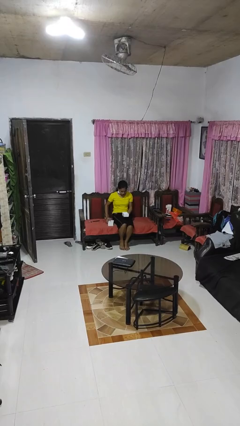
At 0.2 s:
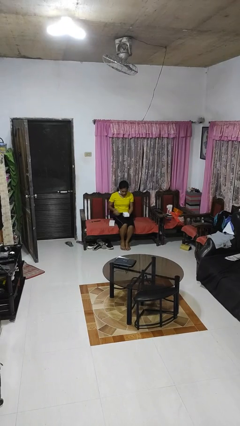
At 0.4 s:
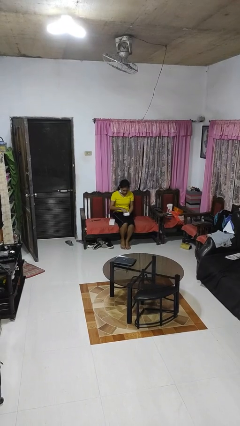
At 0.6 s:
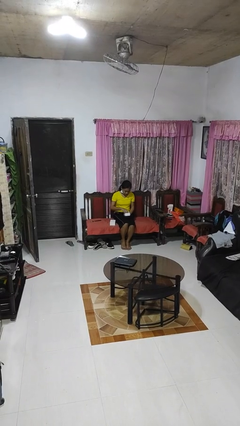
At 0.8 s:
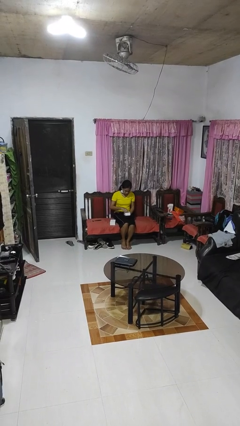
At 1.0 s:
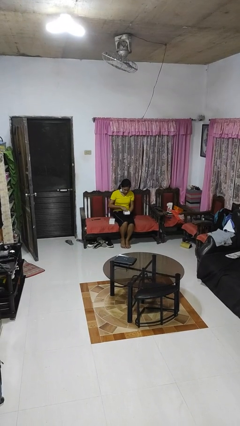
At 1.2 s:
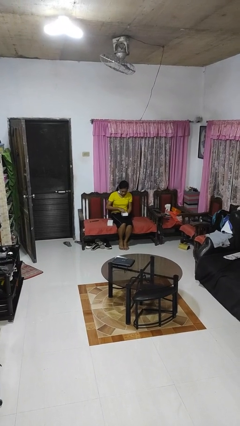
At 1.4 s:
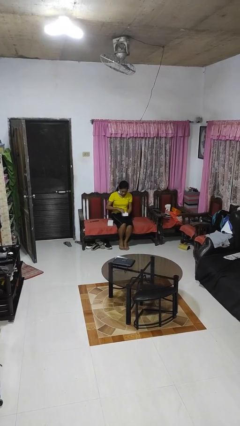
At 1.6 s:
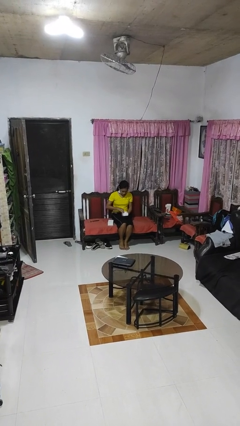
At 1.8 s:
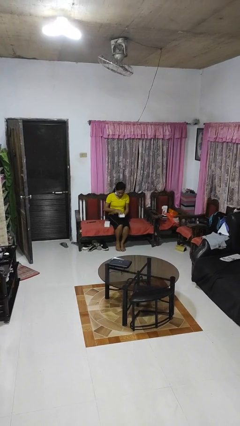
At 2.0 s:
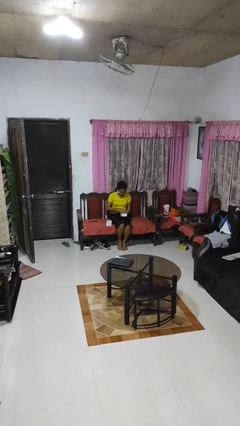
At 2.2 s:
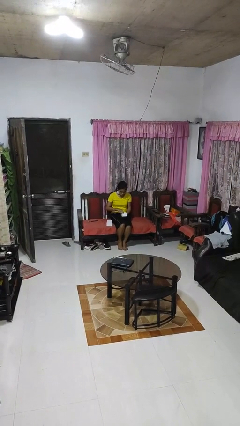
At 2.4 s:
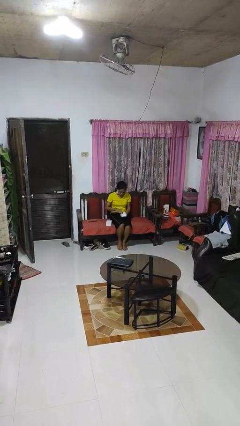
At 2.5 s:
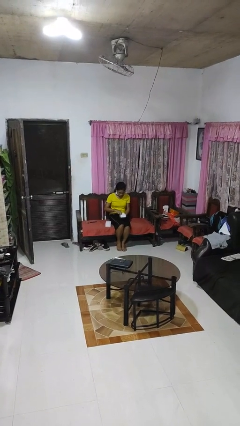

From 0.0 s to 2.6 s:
person searches jewelry box

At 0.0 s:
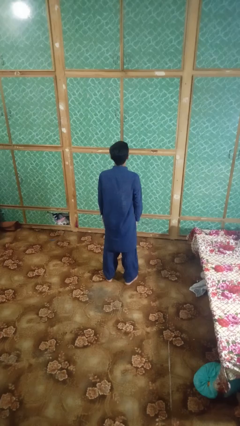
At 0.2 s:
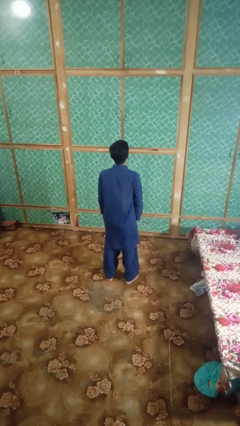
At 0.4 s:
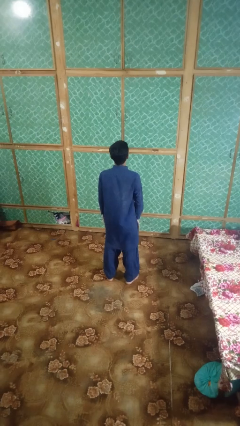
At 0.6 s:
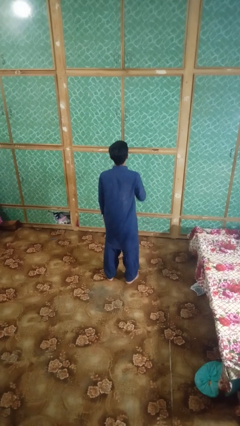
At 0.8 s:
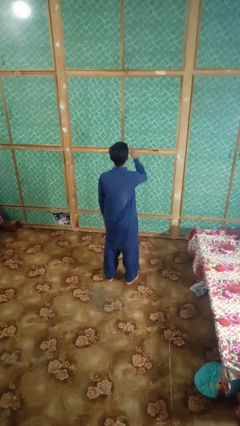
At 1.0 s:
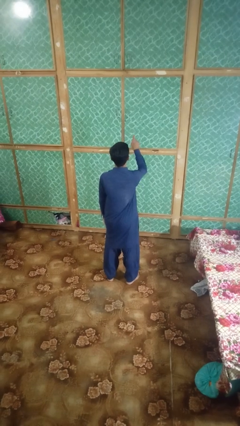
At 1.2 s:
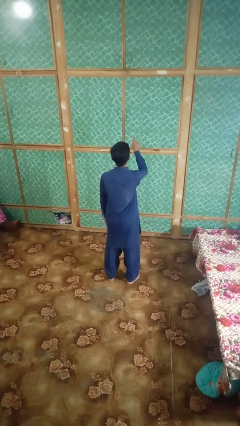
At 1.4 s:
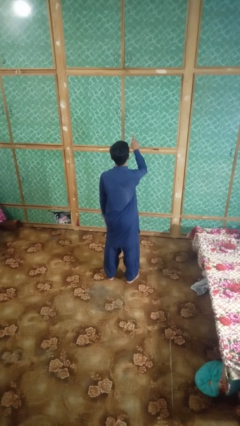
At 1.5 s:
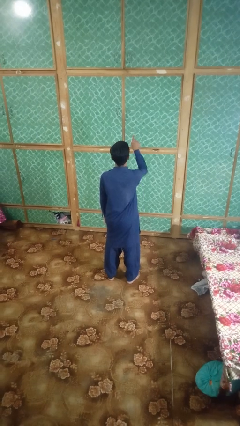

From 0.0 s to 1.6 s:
person gestures number one

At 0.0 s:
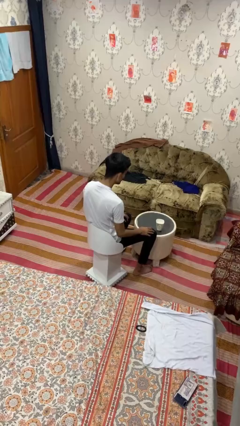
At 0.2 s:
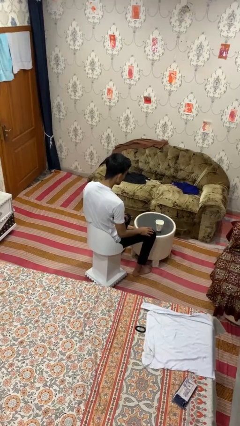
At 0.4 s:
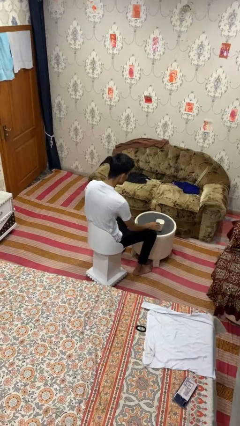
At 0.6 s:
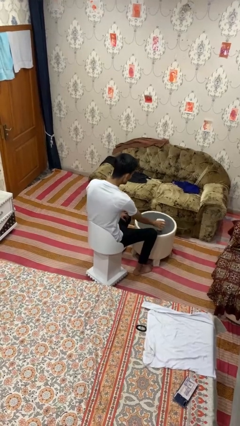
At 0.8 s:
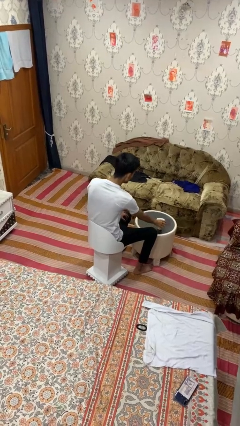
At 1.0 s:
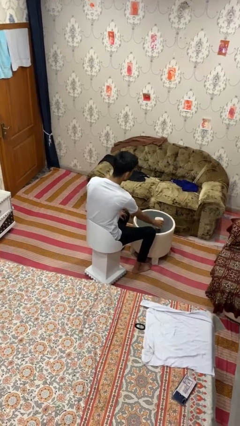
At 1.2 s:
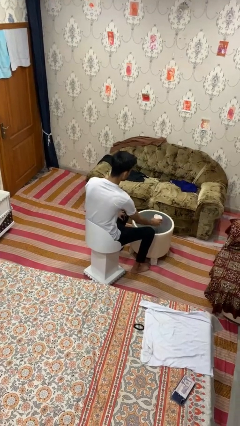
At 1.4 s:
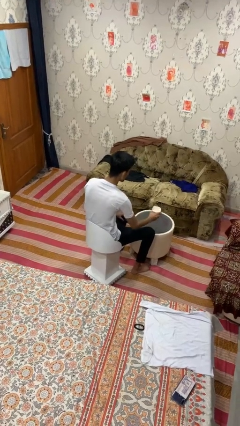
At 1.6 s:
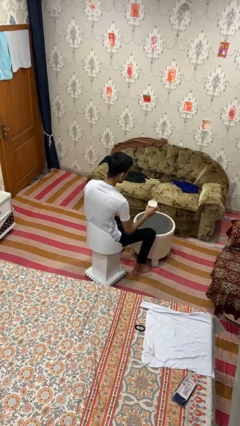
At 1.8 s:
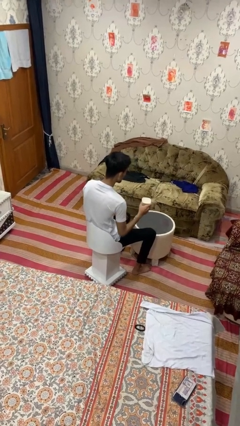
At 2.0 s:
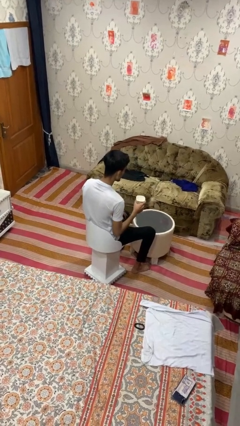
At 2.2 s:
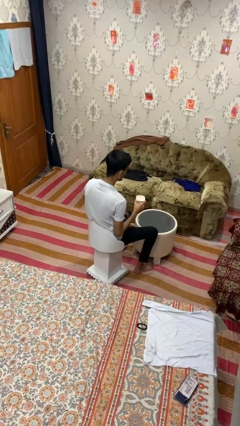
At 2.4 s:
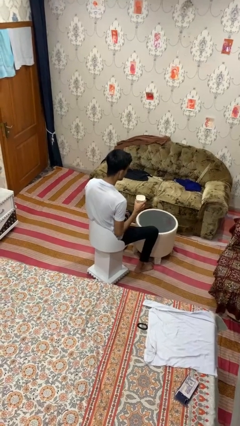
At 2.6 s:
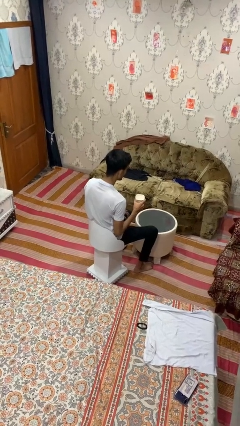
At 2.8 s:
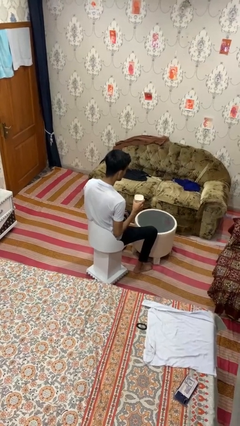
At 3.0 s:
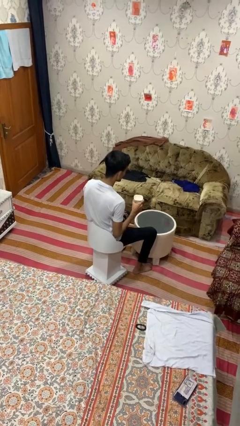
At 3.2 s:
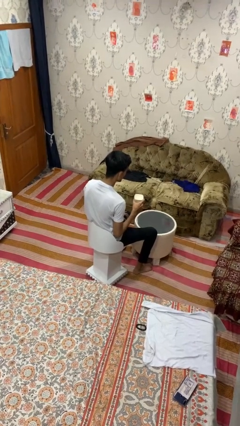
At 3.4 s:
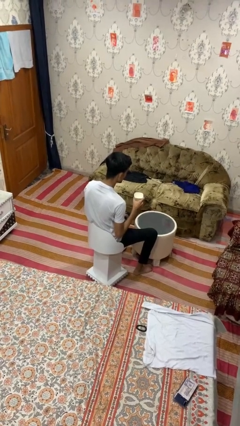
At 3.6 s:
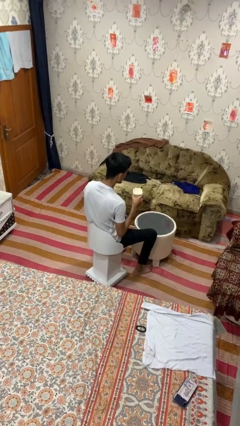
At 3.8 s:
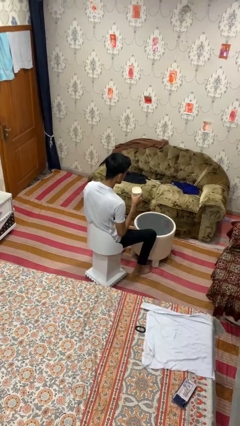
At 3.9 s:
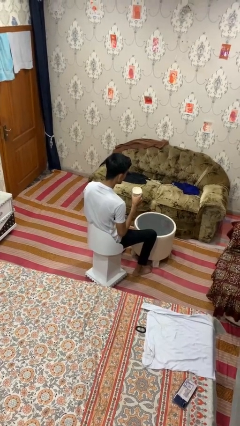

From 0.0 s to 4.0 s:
person picks up object from table

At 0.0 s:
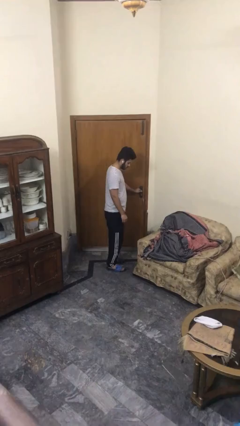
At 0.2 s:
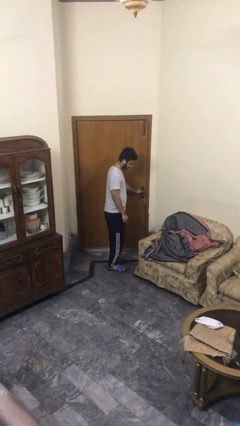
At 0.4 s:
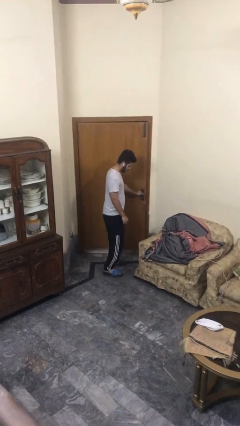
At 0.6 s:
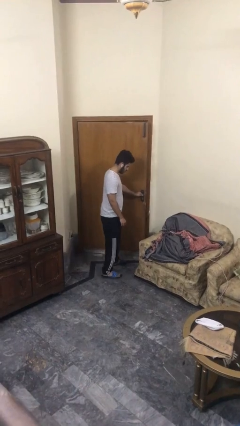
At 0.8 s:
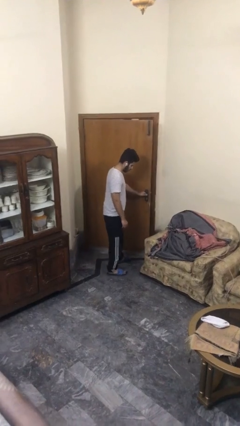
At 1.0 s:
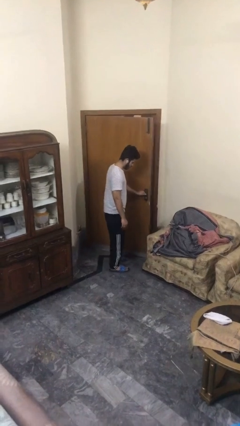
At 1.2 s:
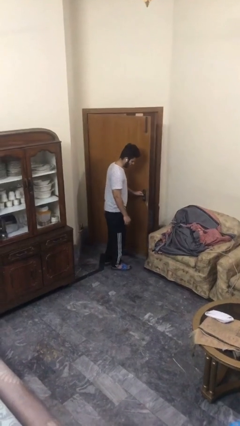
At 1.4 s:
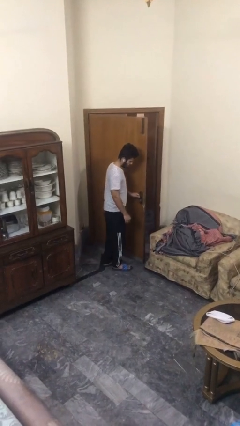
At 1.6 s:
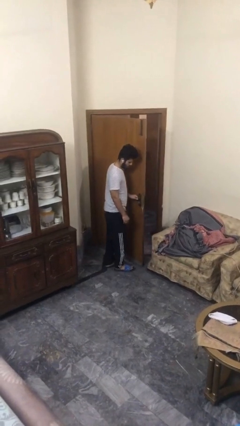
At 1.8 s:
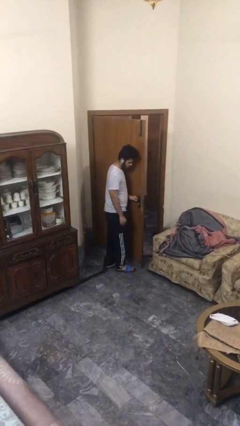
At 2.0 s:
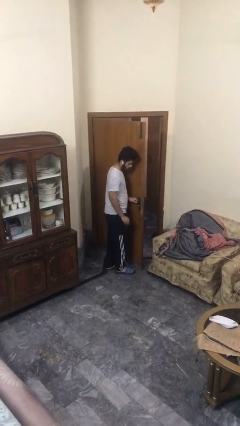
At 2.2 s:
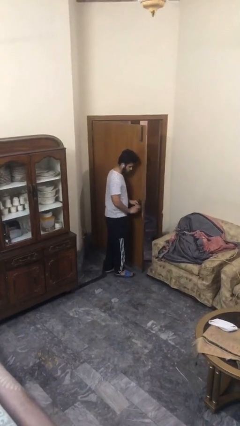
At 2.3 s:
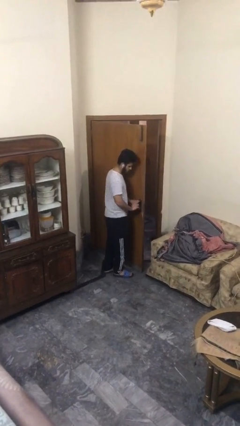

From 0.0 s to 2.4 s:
person opens facility door

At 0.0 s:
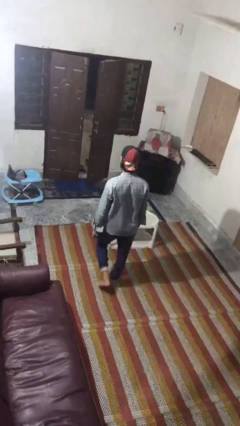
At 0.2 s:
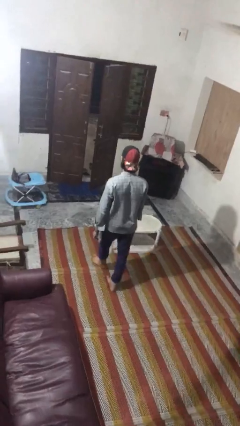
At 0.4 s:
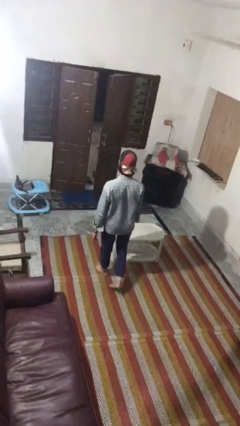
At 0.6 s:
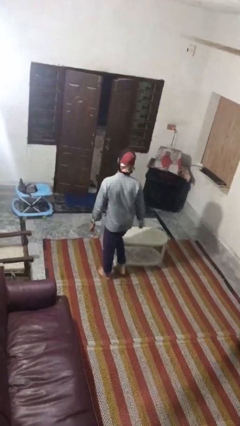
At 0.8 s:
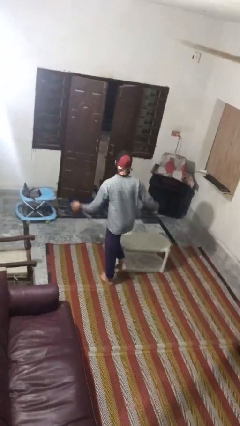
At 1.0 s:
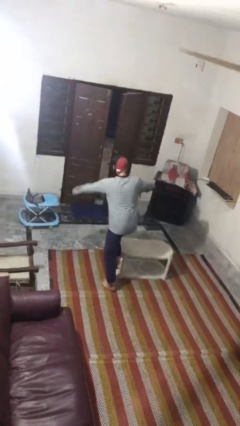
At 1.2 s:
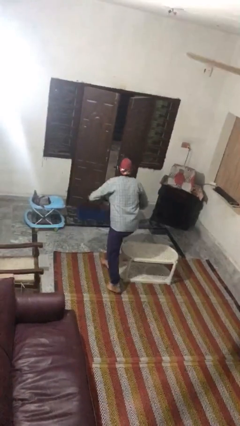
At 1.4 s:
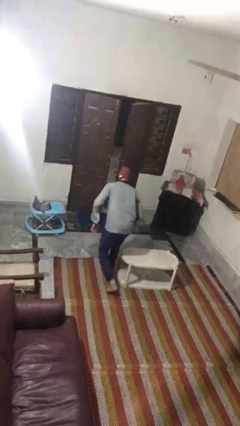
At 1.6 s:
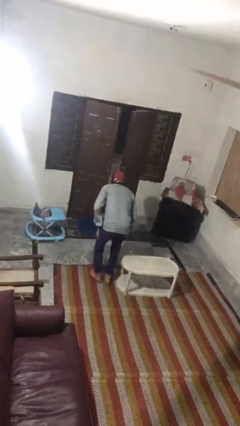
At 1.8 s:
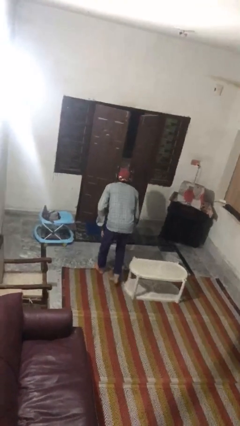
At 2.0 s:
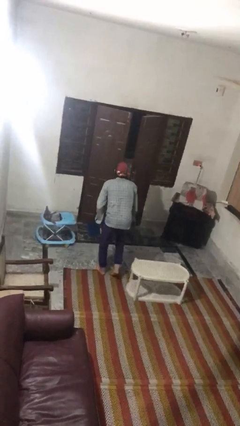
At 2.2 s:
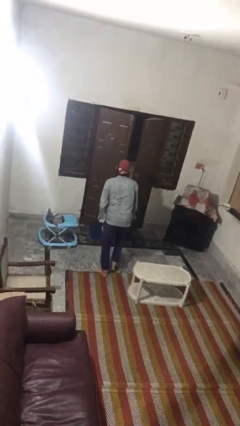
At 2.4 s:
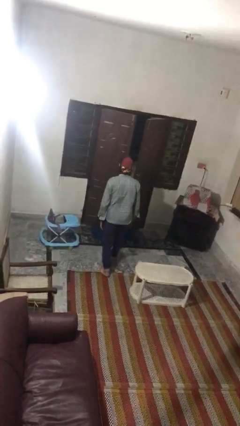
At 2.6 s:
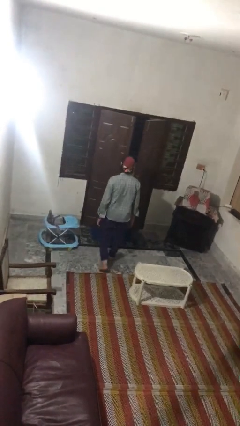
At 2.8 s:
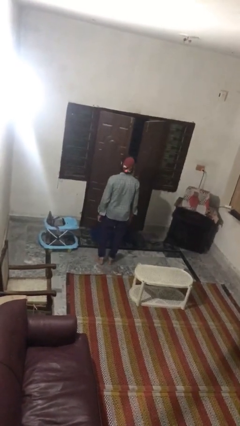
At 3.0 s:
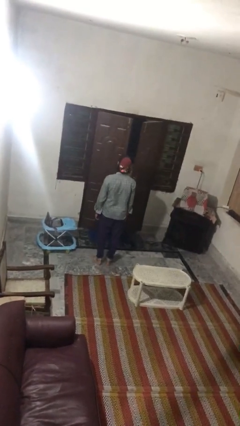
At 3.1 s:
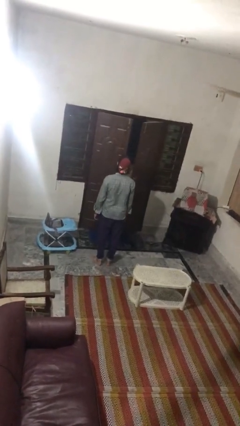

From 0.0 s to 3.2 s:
person bumps into table

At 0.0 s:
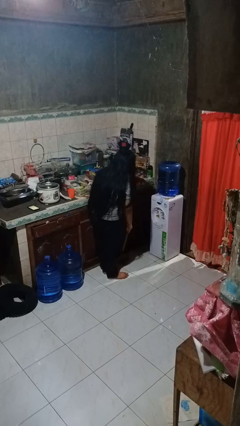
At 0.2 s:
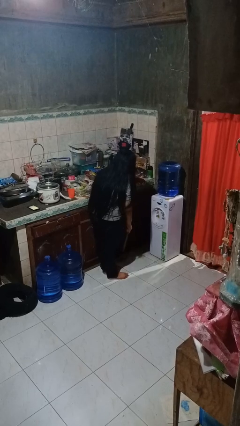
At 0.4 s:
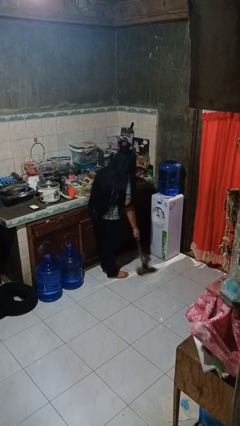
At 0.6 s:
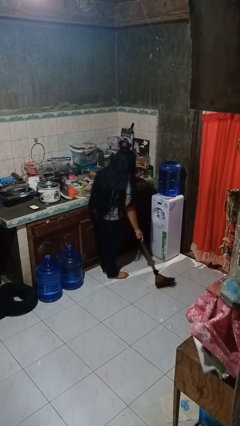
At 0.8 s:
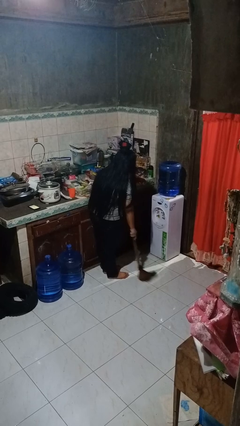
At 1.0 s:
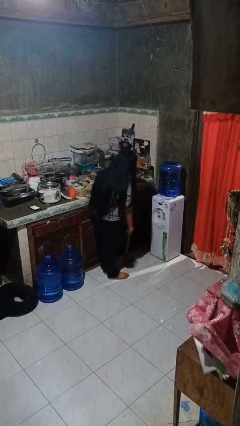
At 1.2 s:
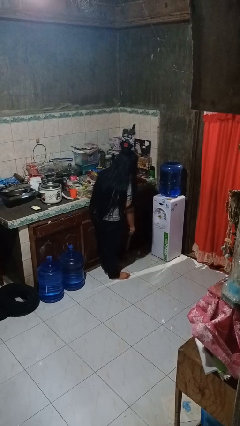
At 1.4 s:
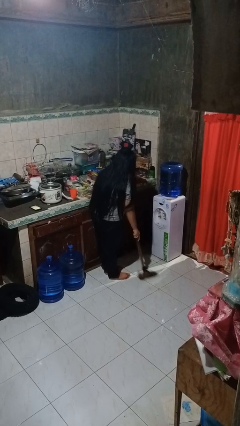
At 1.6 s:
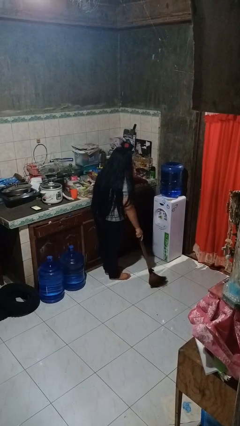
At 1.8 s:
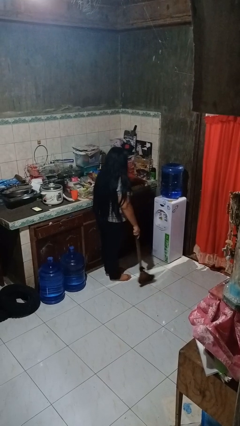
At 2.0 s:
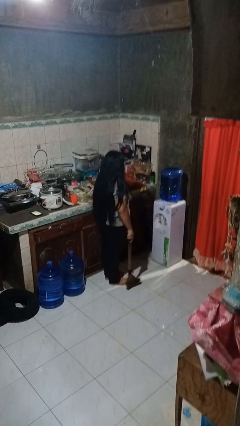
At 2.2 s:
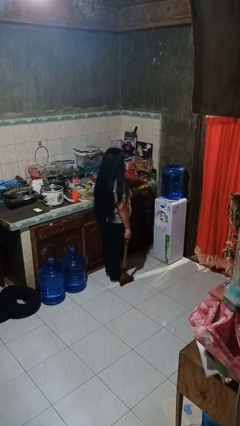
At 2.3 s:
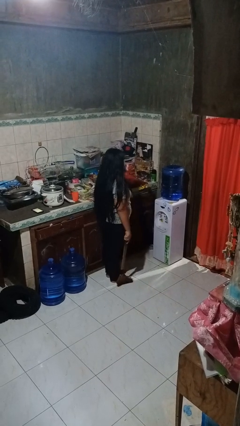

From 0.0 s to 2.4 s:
person sweeps floor

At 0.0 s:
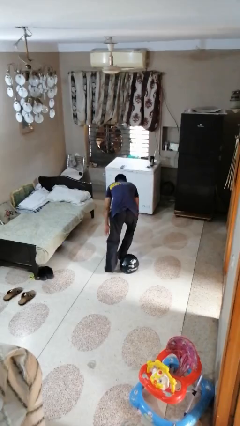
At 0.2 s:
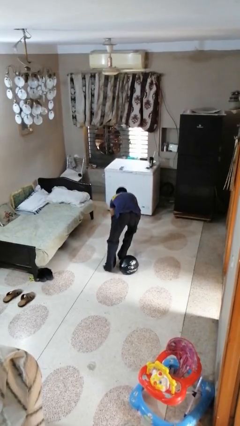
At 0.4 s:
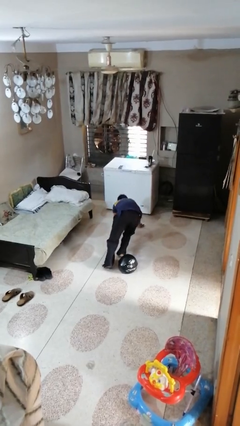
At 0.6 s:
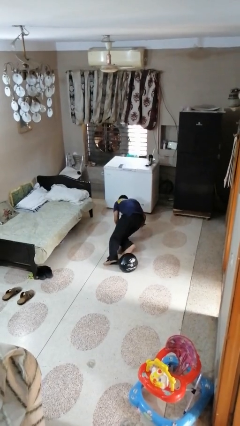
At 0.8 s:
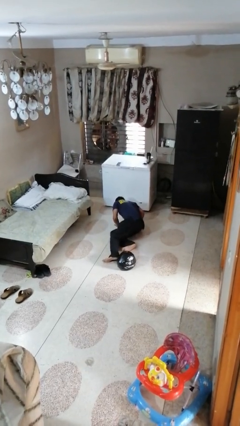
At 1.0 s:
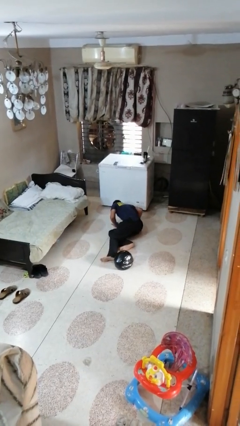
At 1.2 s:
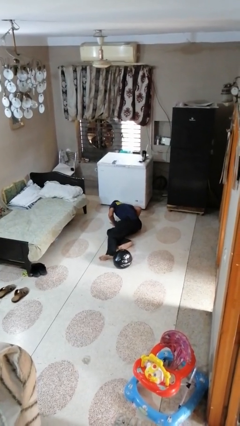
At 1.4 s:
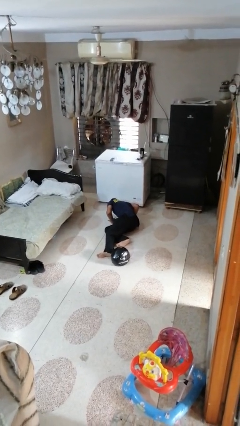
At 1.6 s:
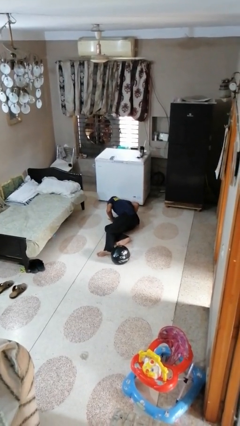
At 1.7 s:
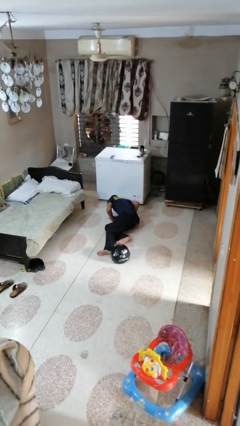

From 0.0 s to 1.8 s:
person lies down on floor
